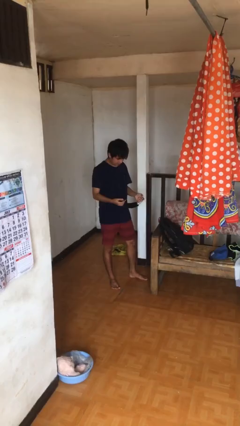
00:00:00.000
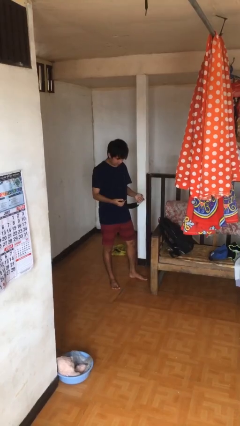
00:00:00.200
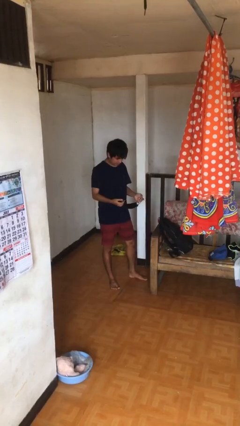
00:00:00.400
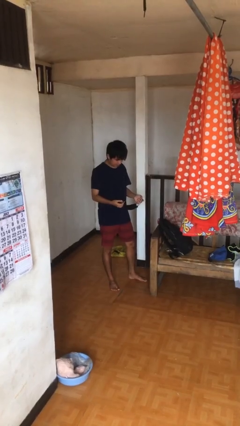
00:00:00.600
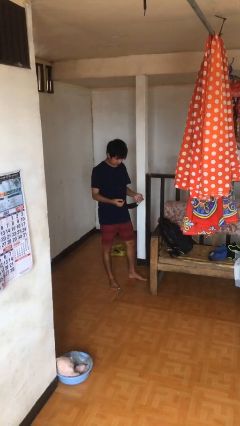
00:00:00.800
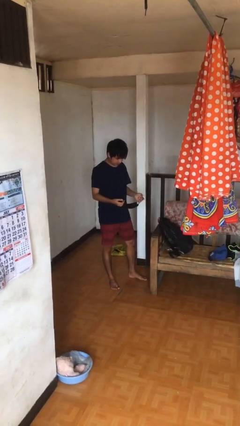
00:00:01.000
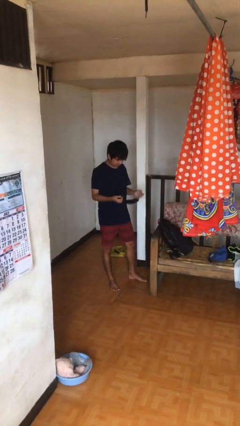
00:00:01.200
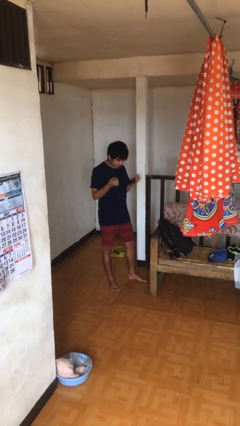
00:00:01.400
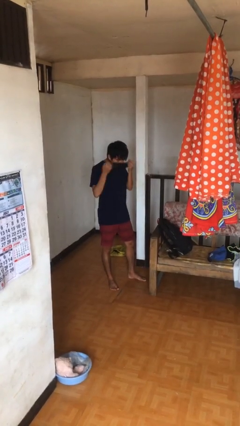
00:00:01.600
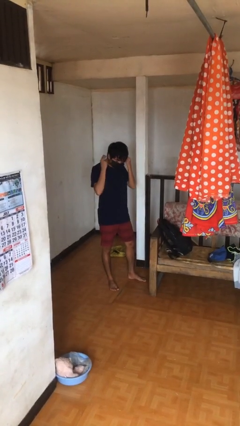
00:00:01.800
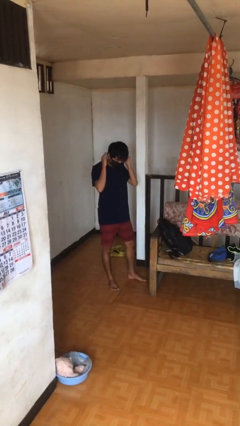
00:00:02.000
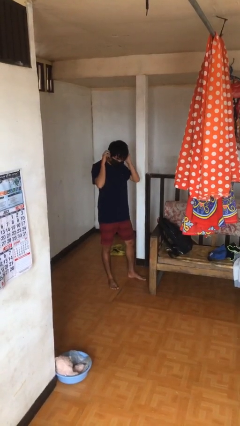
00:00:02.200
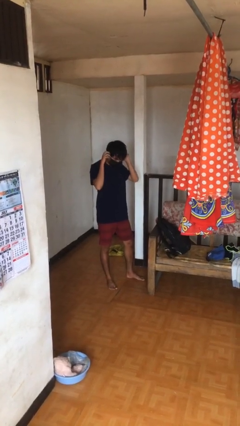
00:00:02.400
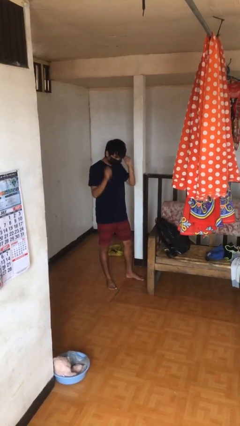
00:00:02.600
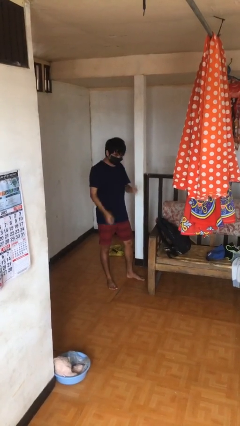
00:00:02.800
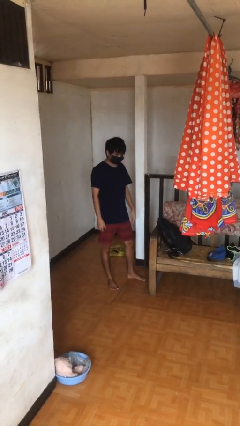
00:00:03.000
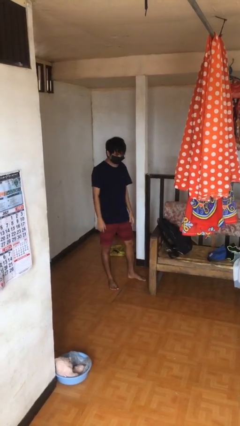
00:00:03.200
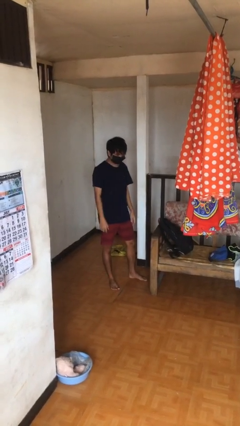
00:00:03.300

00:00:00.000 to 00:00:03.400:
person puts on facemask

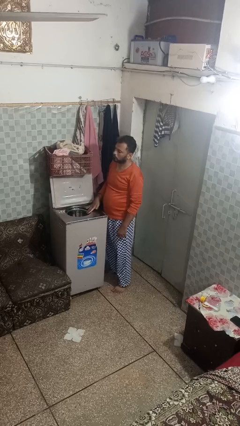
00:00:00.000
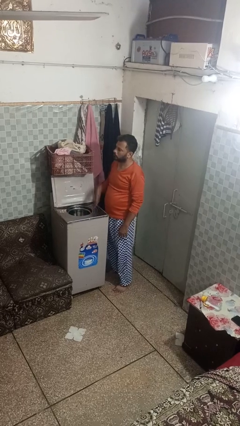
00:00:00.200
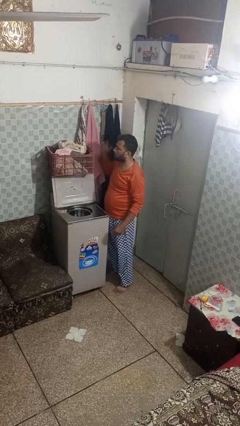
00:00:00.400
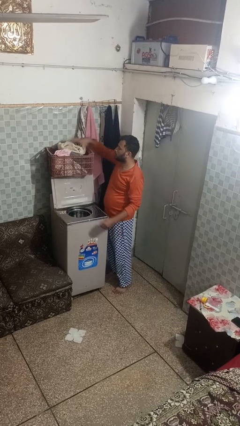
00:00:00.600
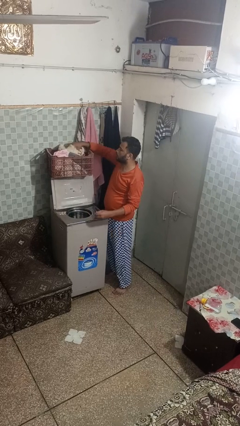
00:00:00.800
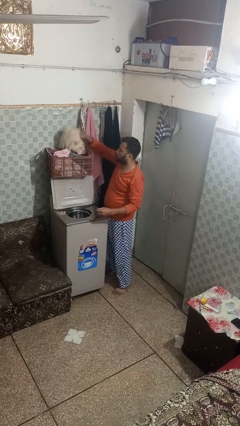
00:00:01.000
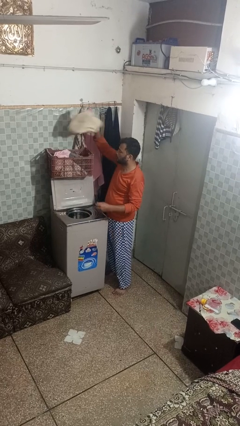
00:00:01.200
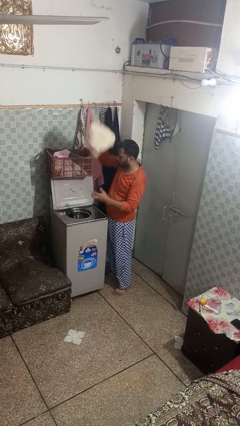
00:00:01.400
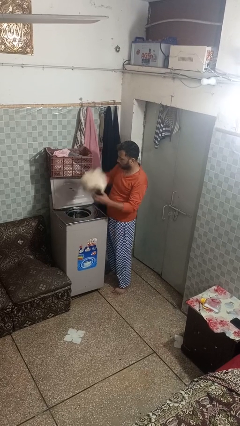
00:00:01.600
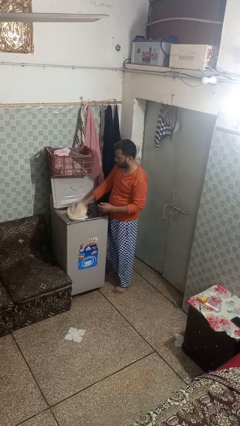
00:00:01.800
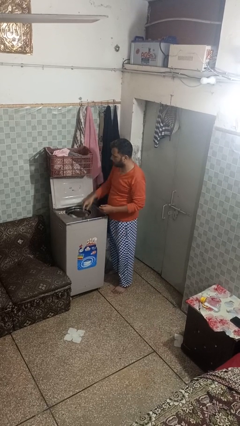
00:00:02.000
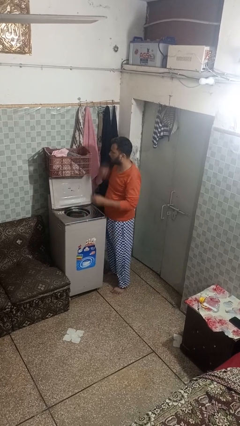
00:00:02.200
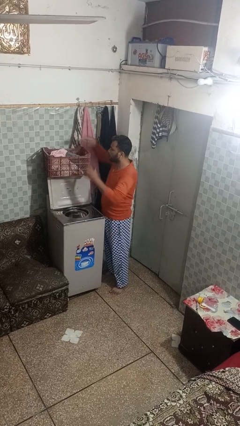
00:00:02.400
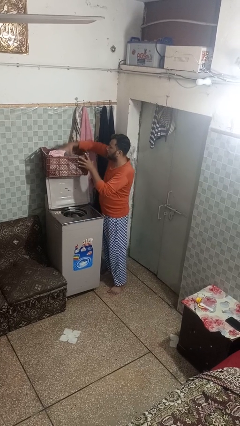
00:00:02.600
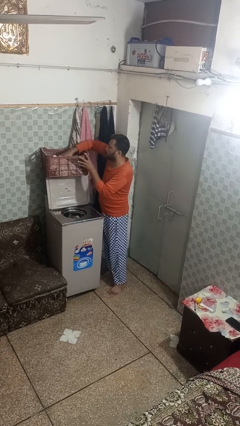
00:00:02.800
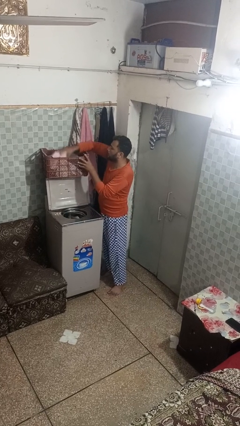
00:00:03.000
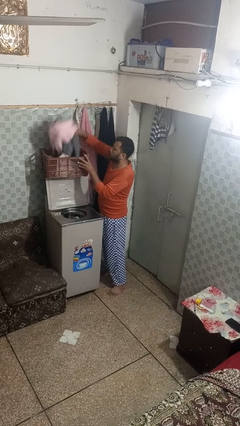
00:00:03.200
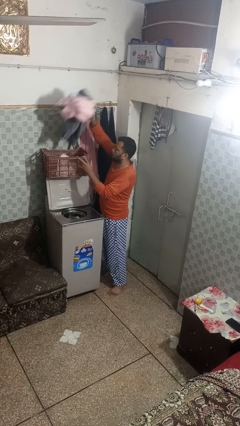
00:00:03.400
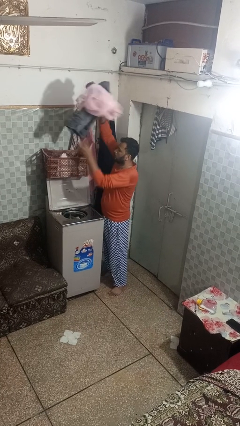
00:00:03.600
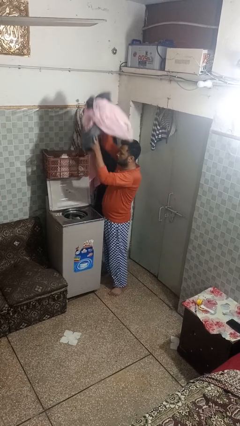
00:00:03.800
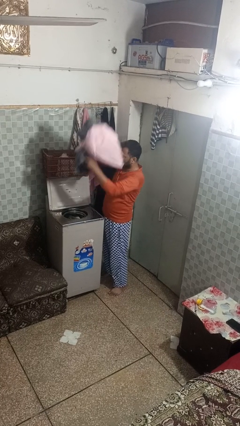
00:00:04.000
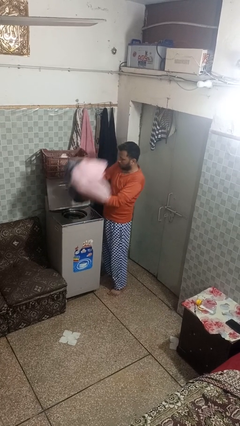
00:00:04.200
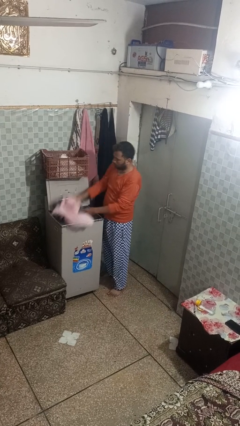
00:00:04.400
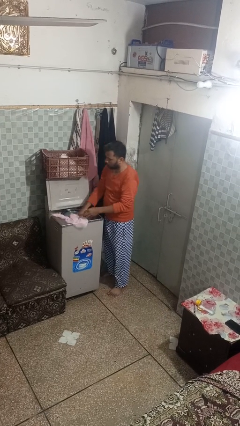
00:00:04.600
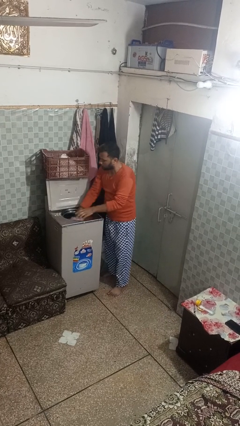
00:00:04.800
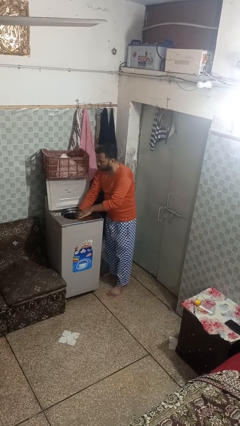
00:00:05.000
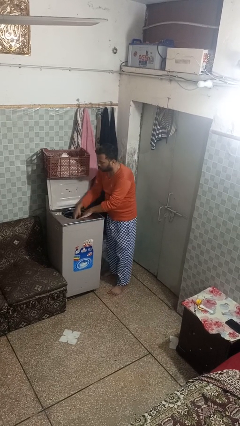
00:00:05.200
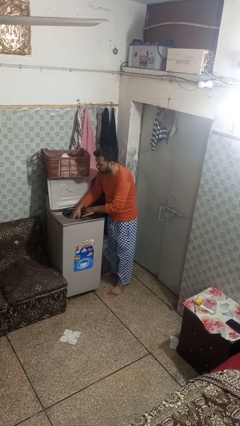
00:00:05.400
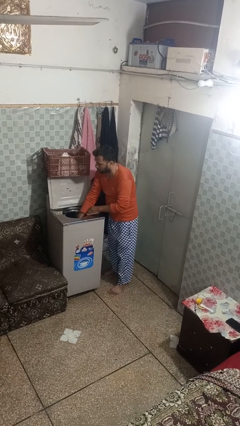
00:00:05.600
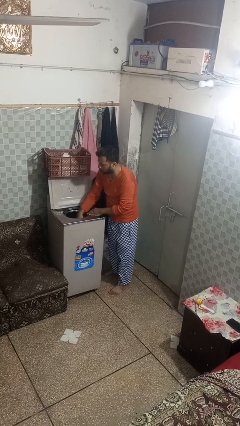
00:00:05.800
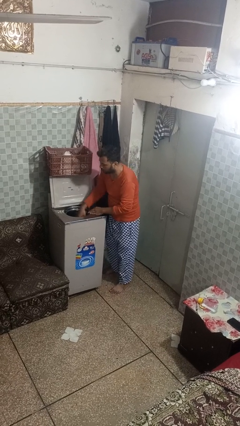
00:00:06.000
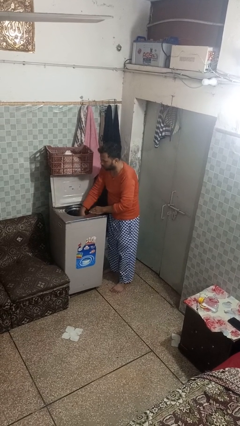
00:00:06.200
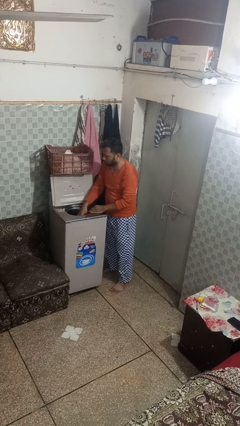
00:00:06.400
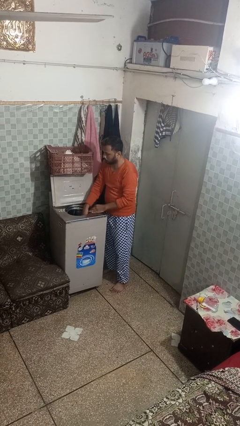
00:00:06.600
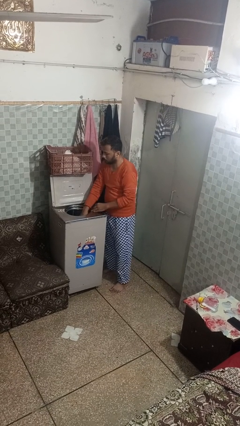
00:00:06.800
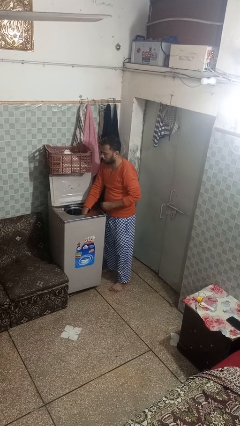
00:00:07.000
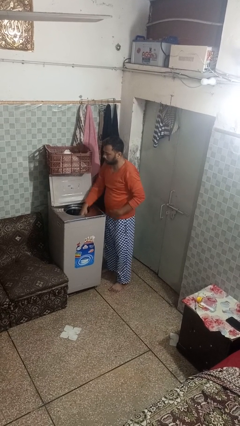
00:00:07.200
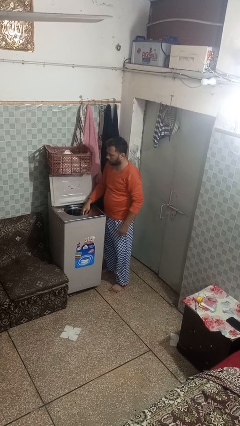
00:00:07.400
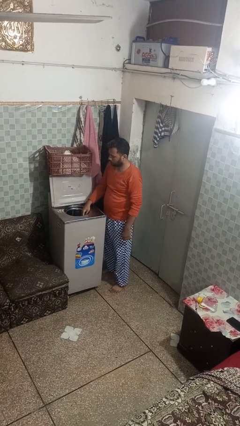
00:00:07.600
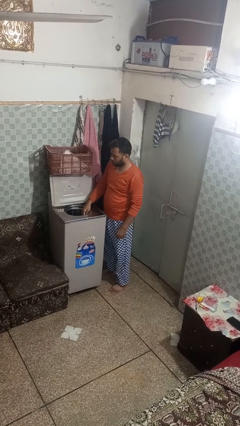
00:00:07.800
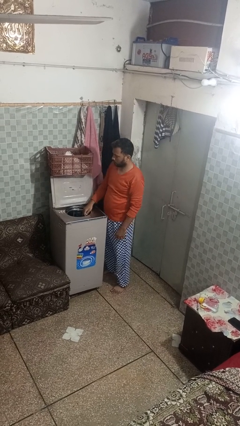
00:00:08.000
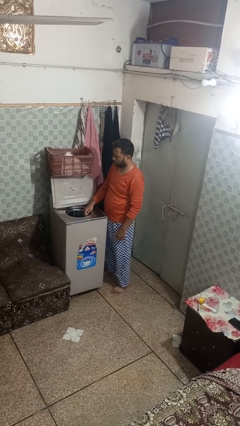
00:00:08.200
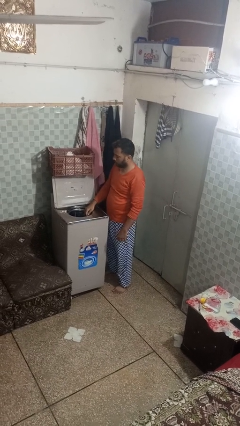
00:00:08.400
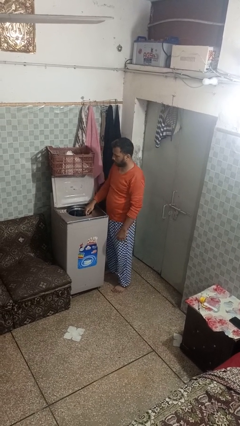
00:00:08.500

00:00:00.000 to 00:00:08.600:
person loads dryer

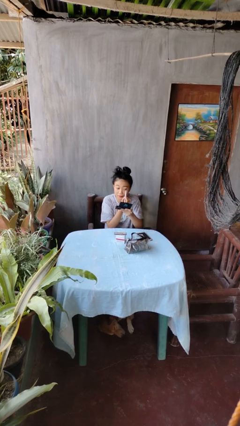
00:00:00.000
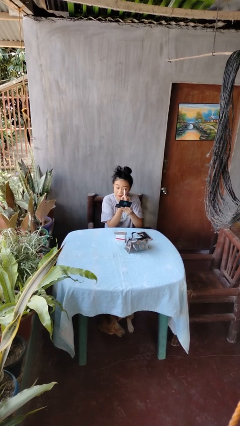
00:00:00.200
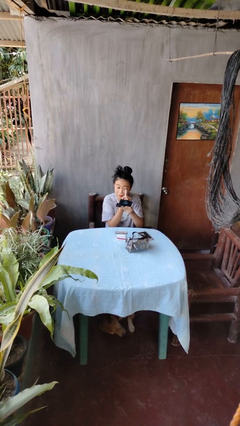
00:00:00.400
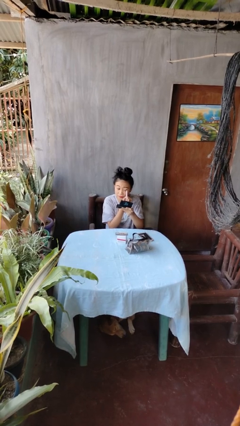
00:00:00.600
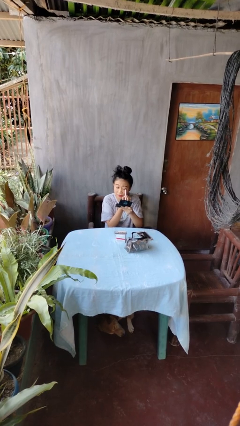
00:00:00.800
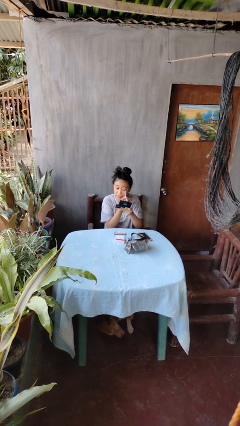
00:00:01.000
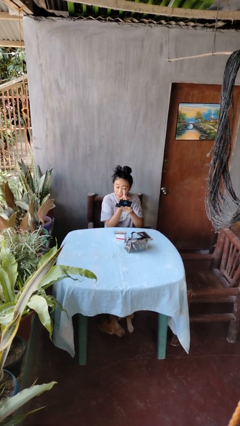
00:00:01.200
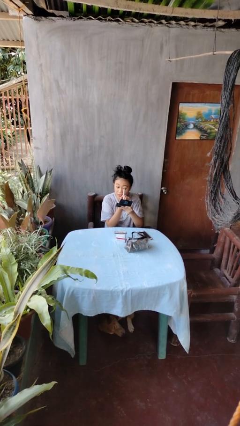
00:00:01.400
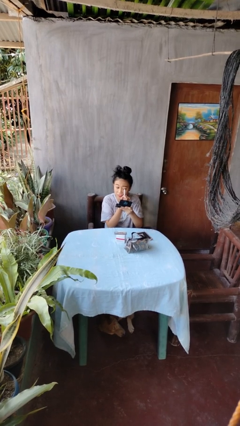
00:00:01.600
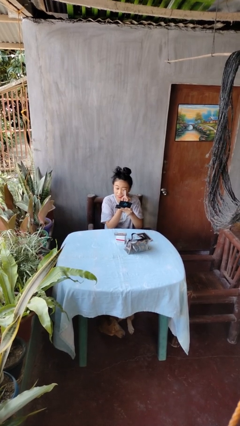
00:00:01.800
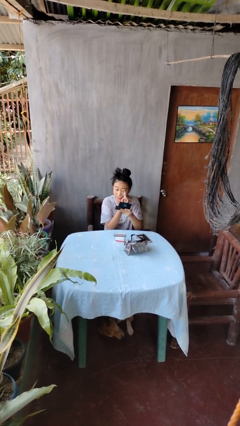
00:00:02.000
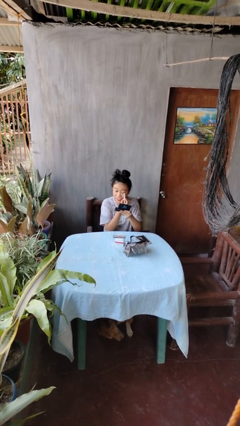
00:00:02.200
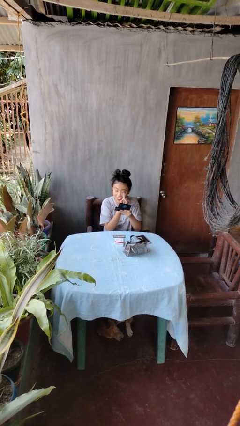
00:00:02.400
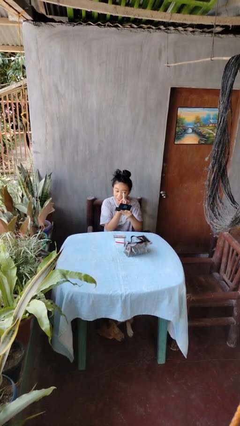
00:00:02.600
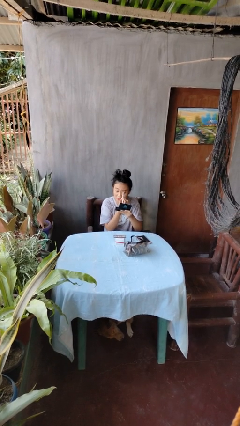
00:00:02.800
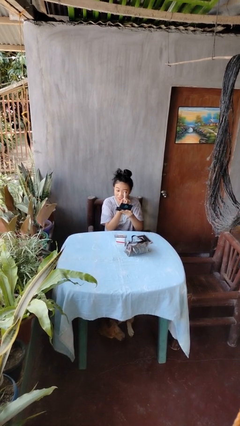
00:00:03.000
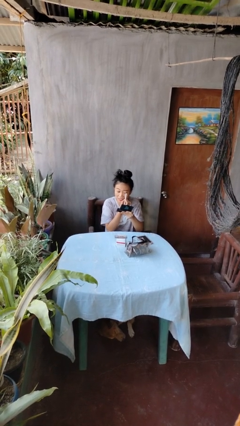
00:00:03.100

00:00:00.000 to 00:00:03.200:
person applies eye makeup

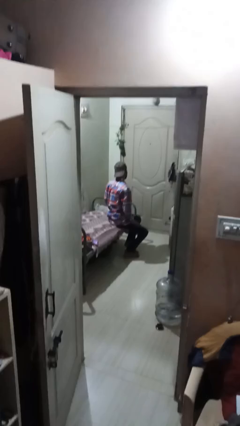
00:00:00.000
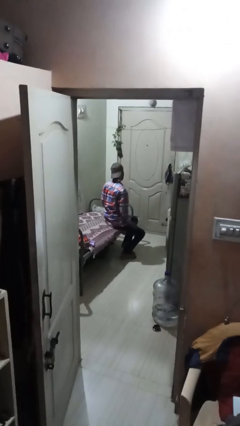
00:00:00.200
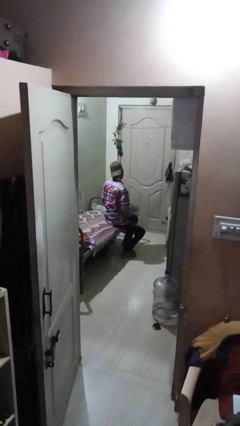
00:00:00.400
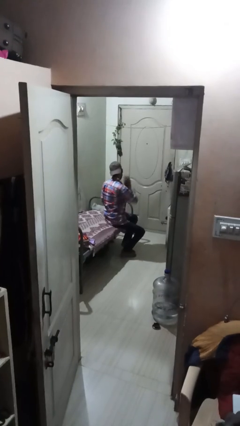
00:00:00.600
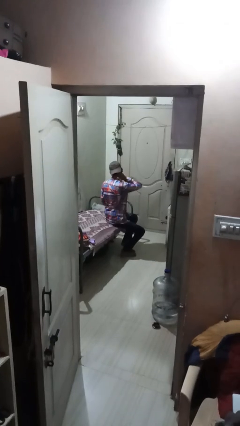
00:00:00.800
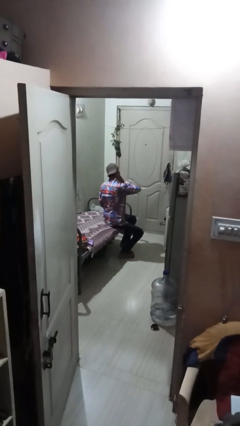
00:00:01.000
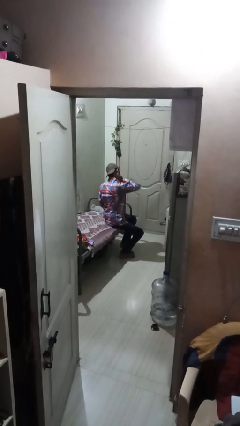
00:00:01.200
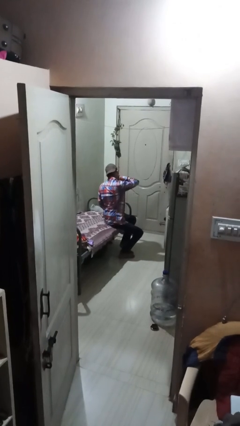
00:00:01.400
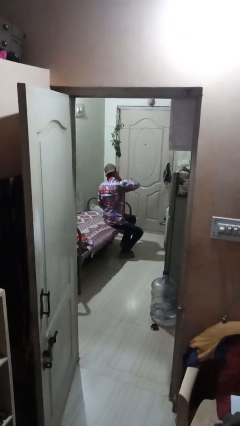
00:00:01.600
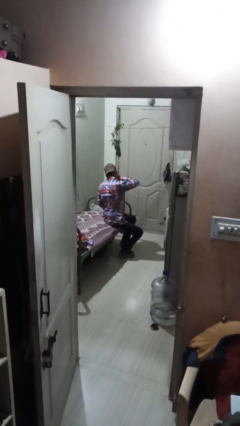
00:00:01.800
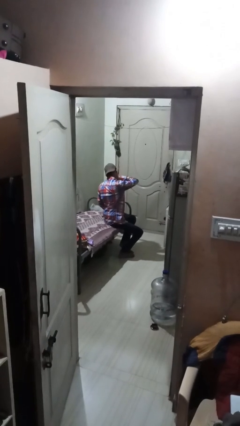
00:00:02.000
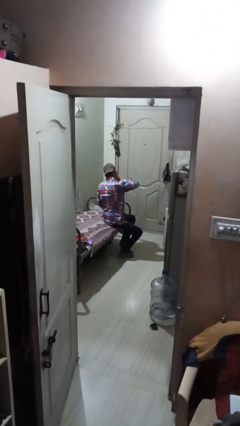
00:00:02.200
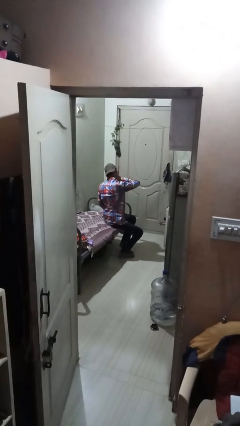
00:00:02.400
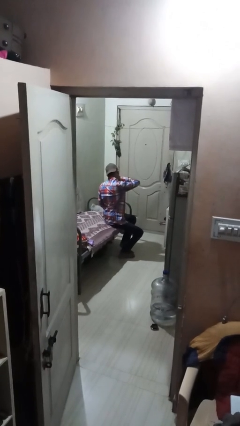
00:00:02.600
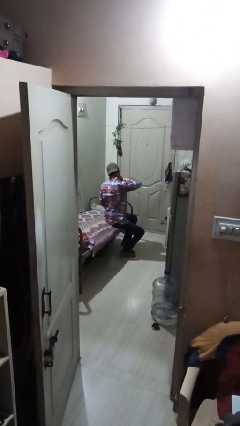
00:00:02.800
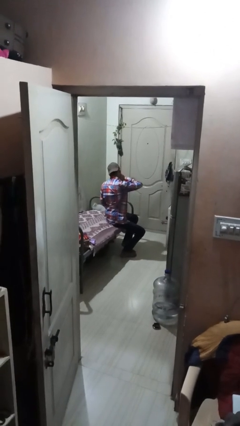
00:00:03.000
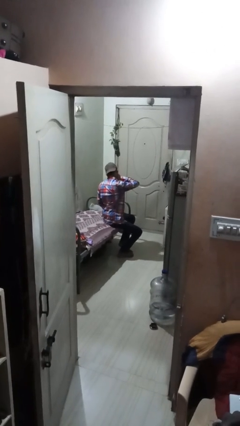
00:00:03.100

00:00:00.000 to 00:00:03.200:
person rubs neck
